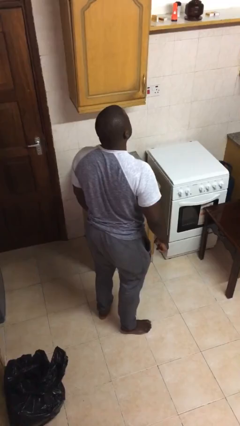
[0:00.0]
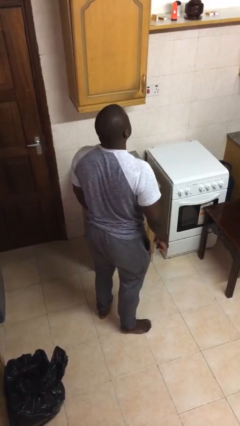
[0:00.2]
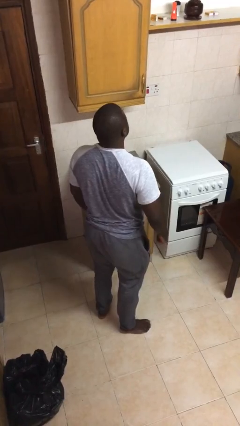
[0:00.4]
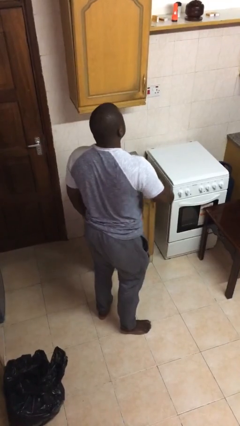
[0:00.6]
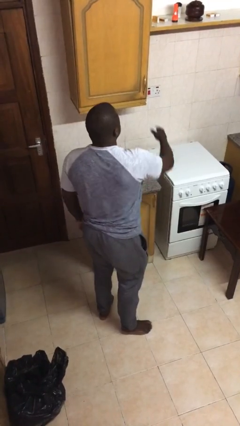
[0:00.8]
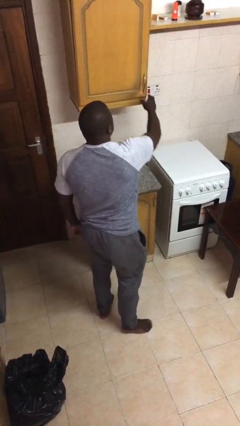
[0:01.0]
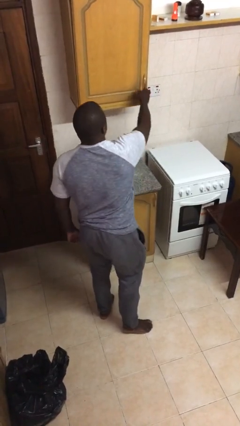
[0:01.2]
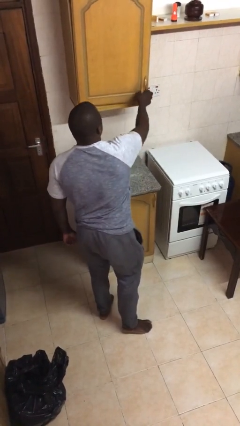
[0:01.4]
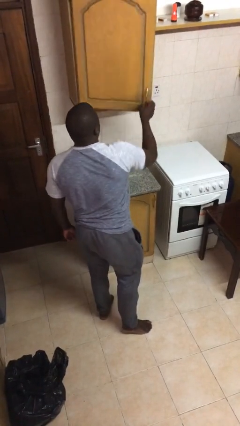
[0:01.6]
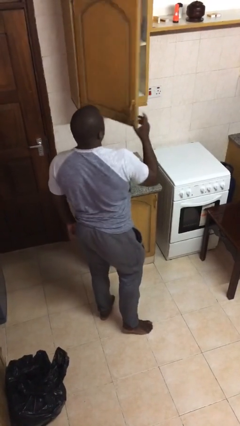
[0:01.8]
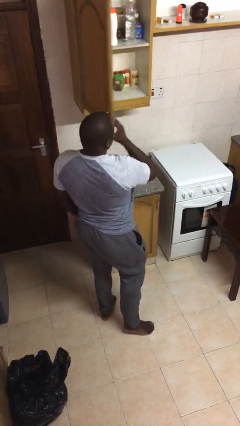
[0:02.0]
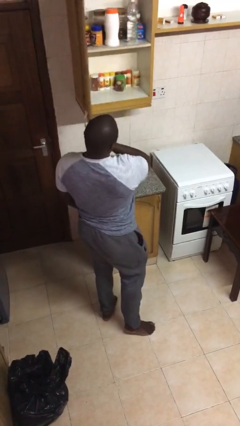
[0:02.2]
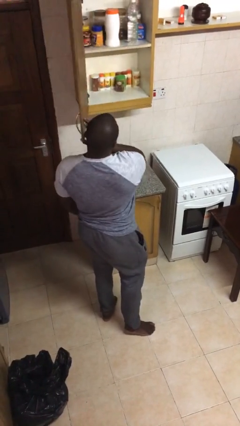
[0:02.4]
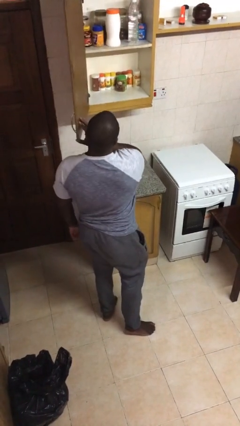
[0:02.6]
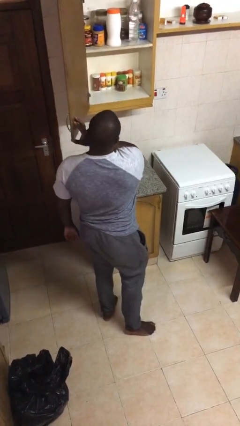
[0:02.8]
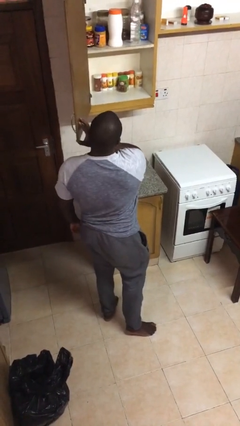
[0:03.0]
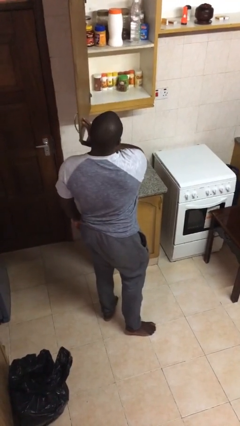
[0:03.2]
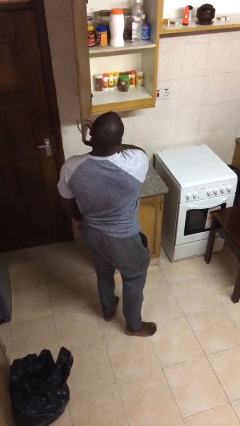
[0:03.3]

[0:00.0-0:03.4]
person opens cabinet

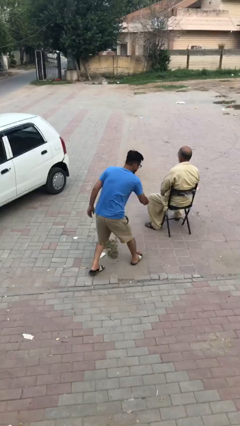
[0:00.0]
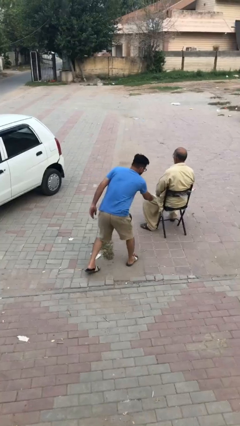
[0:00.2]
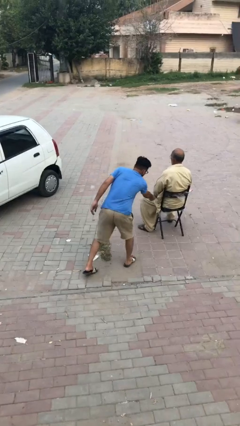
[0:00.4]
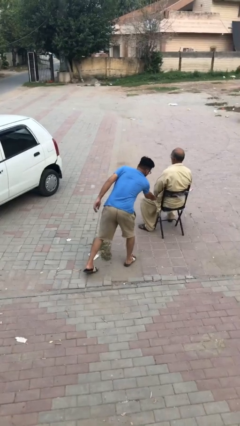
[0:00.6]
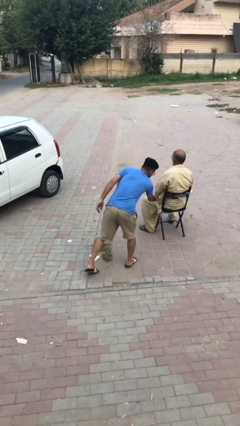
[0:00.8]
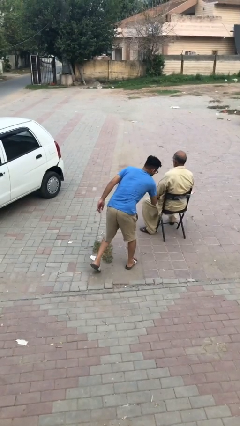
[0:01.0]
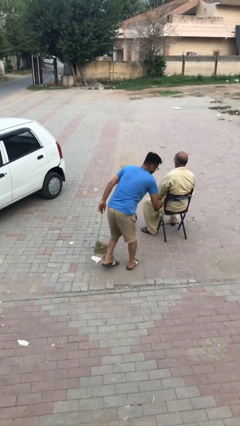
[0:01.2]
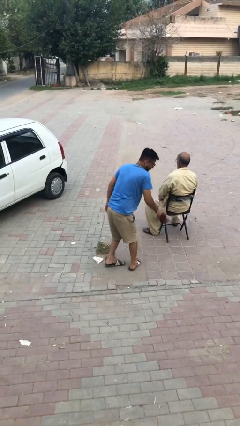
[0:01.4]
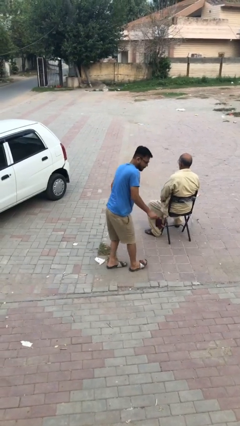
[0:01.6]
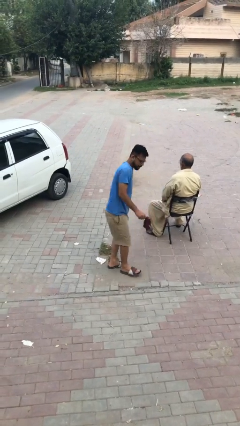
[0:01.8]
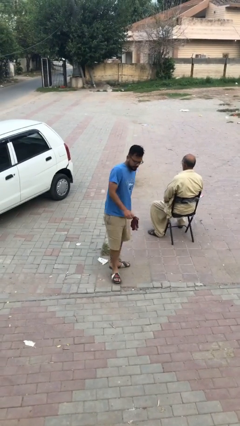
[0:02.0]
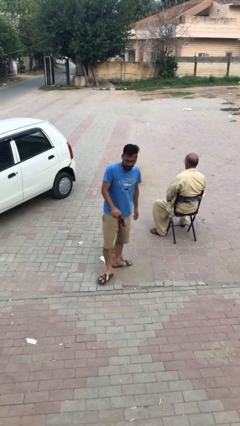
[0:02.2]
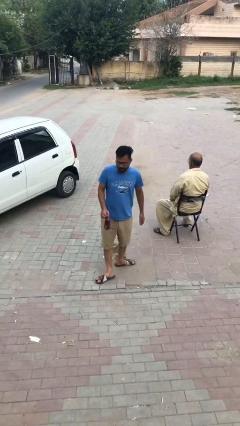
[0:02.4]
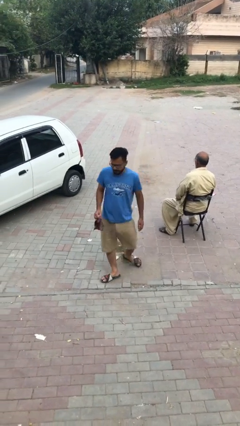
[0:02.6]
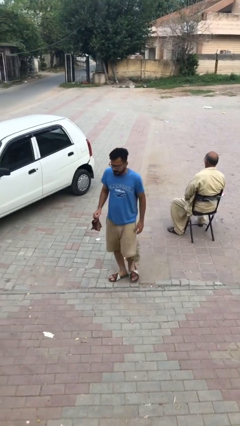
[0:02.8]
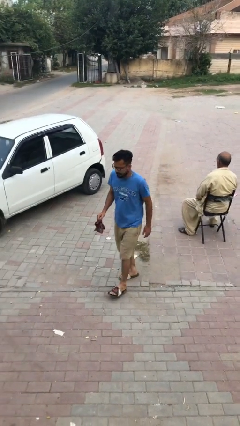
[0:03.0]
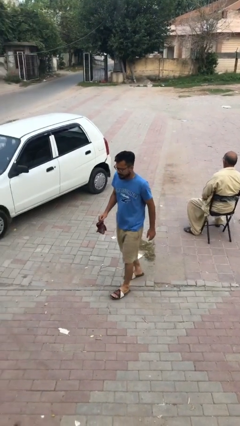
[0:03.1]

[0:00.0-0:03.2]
person steals object from person

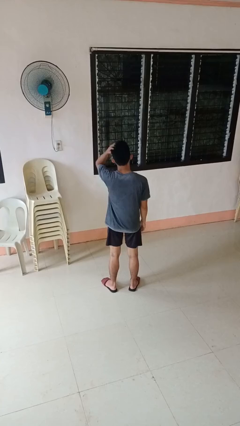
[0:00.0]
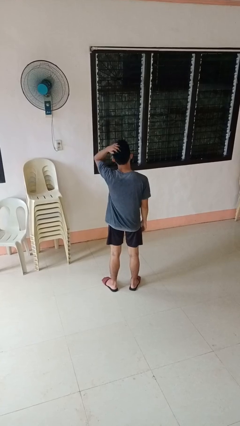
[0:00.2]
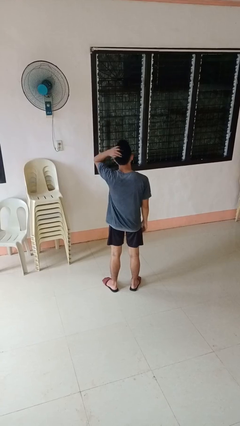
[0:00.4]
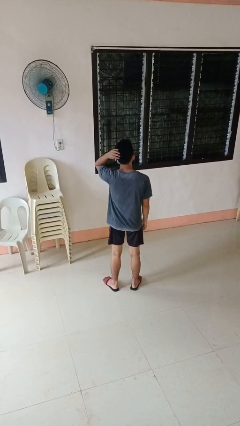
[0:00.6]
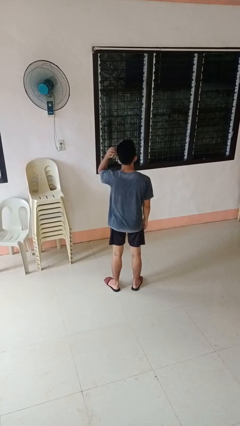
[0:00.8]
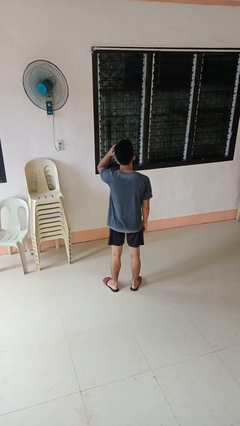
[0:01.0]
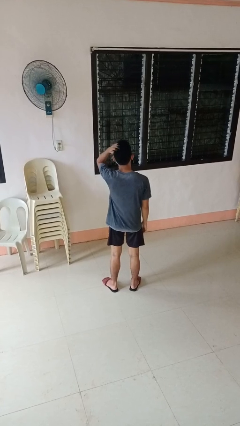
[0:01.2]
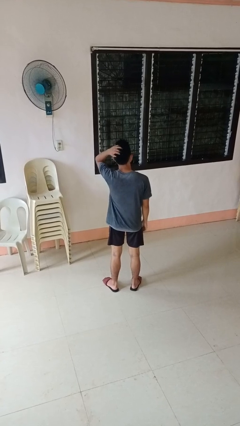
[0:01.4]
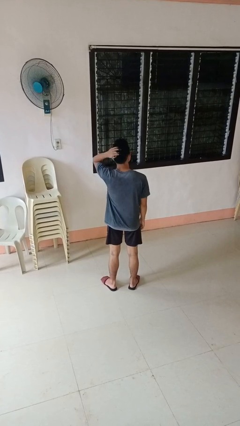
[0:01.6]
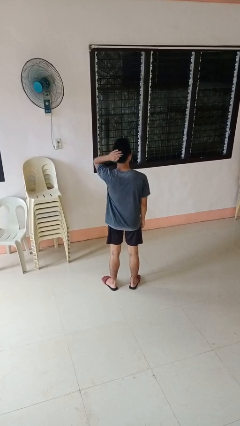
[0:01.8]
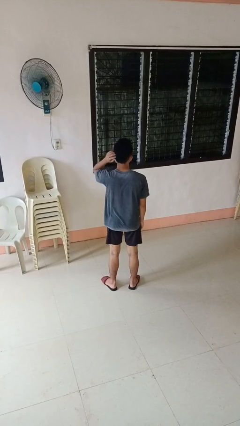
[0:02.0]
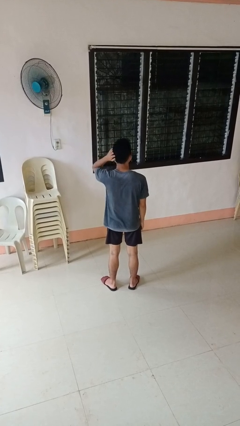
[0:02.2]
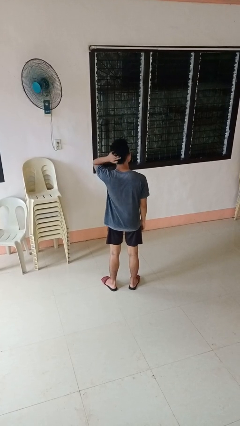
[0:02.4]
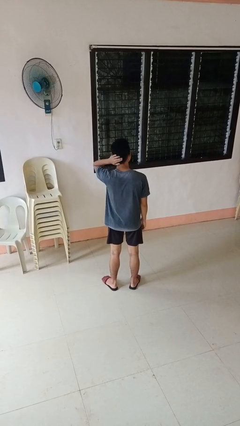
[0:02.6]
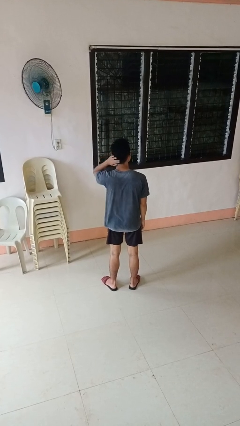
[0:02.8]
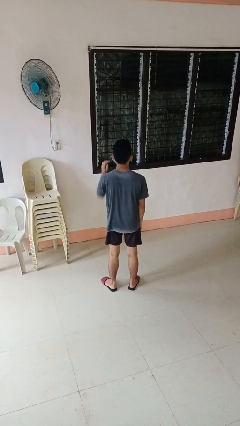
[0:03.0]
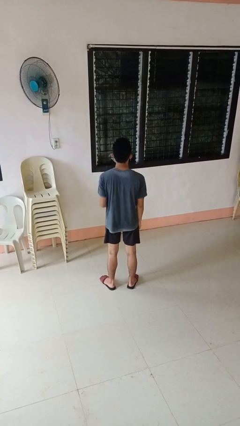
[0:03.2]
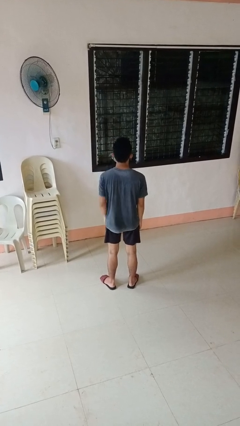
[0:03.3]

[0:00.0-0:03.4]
person strokes hair

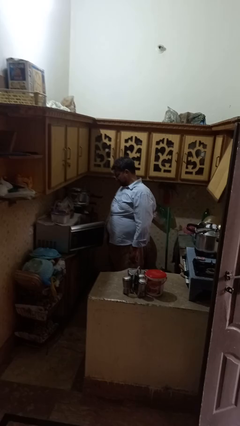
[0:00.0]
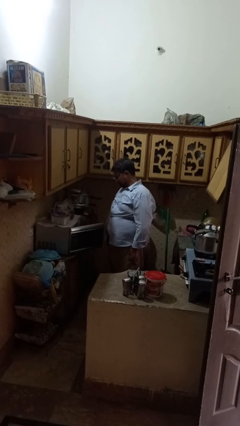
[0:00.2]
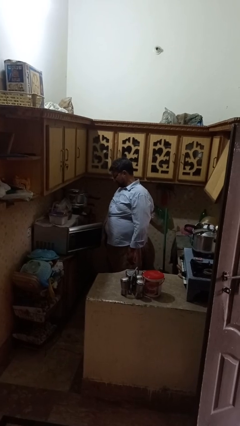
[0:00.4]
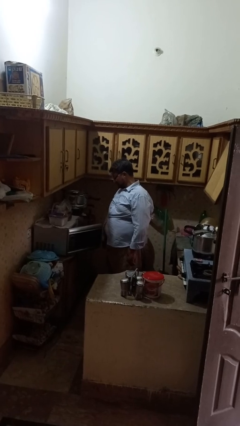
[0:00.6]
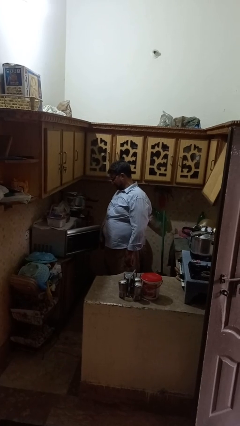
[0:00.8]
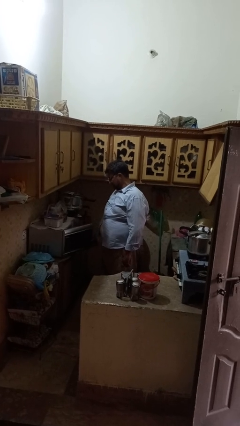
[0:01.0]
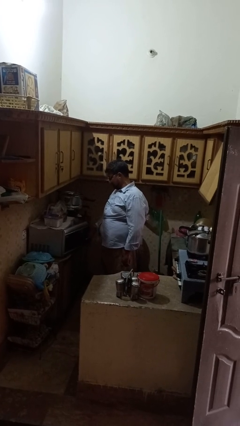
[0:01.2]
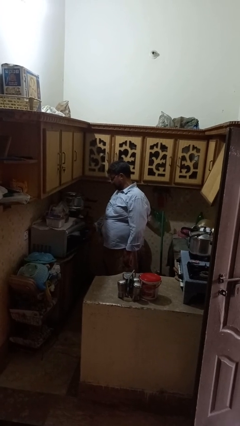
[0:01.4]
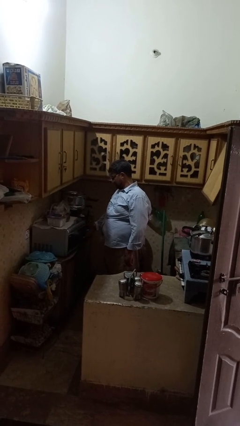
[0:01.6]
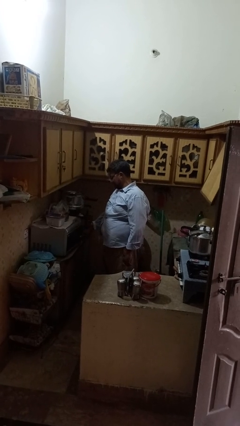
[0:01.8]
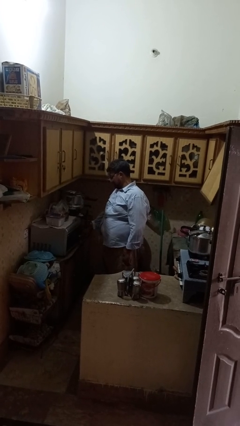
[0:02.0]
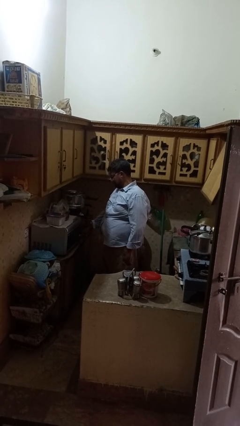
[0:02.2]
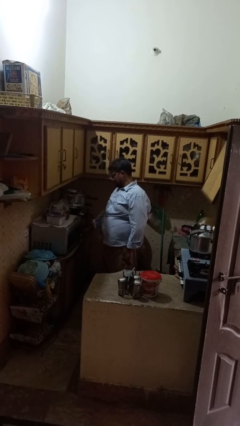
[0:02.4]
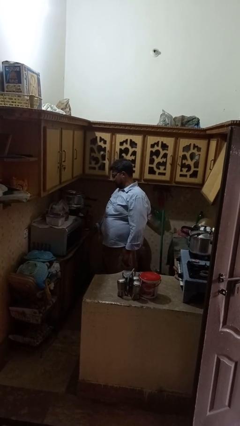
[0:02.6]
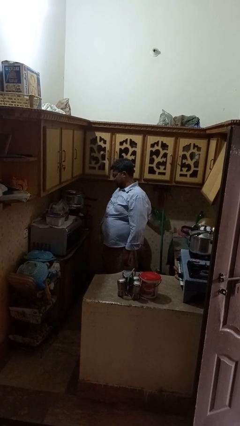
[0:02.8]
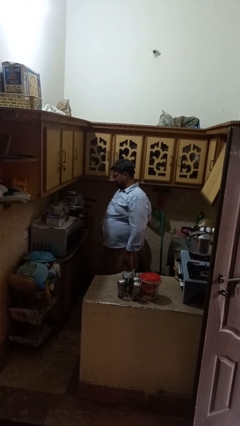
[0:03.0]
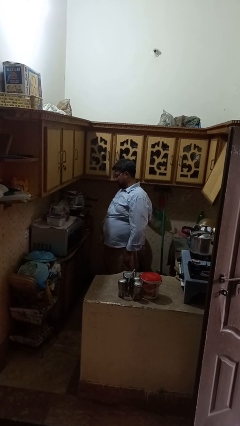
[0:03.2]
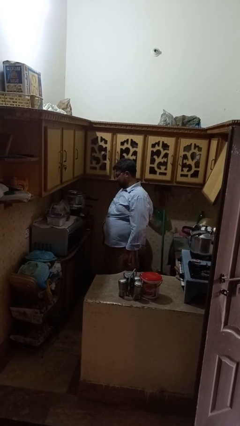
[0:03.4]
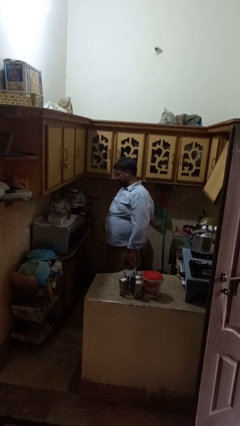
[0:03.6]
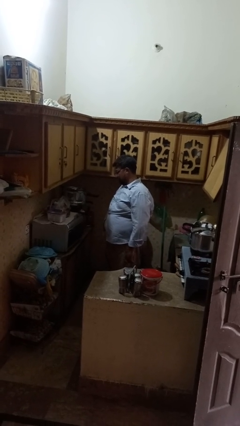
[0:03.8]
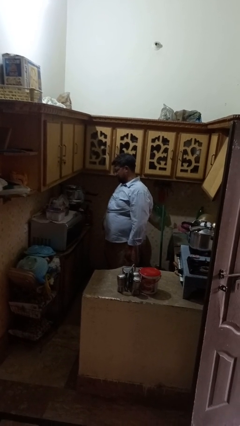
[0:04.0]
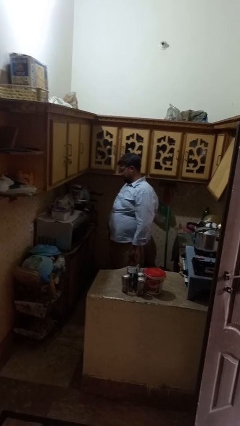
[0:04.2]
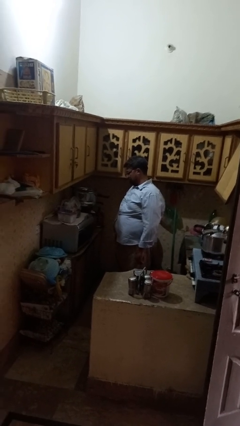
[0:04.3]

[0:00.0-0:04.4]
person closes microwave

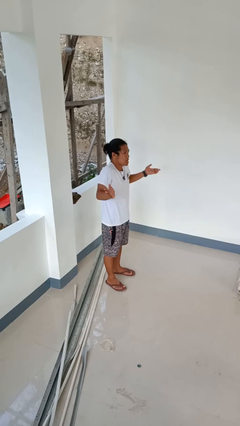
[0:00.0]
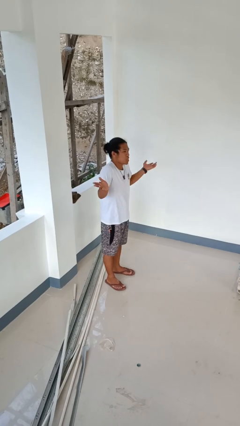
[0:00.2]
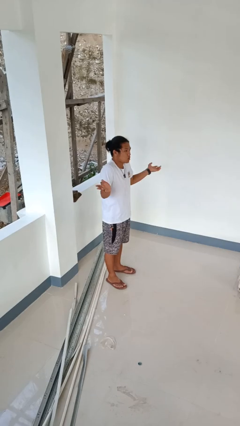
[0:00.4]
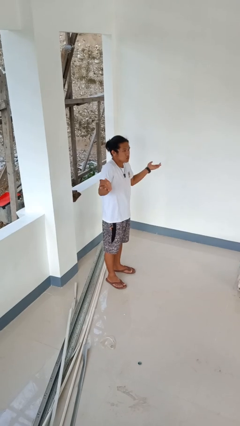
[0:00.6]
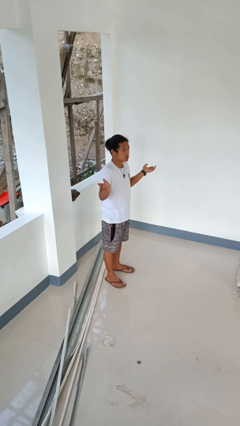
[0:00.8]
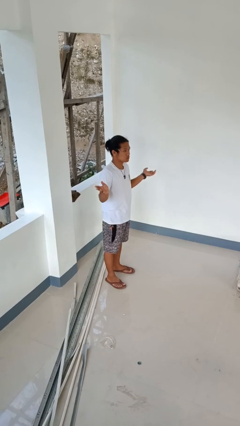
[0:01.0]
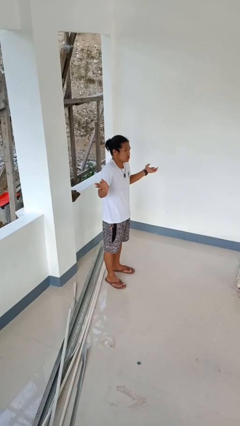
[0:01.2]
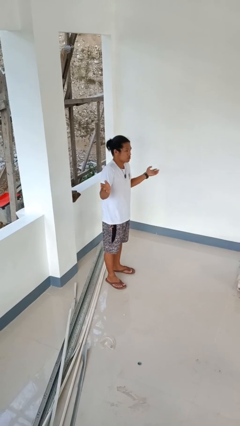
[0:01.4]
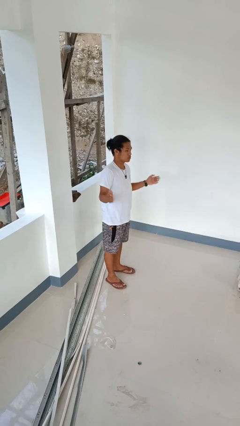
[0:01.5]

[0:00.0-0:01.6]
person shrugs

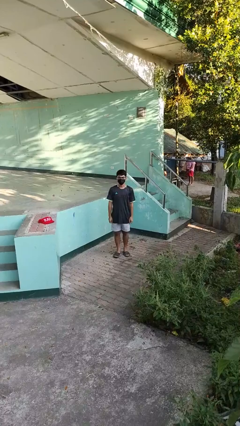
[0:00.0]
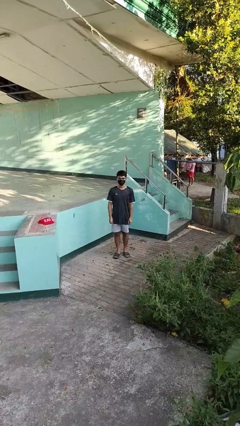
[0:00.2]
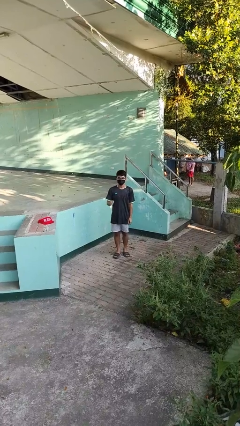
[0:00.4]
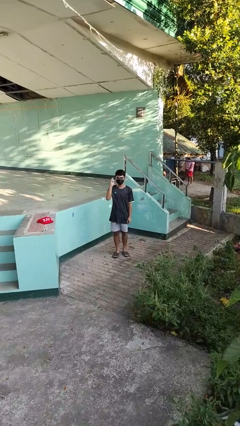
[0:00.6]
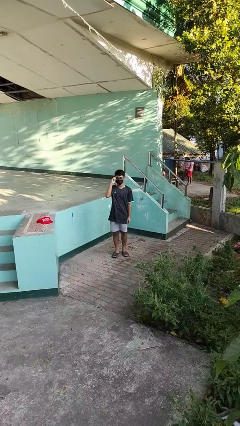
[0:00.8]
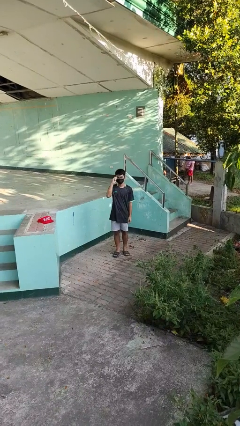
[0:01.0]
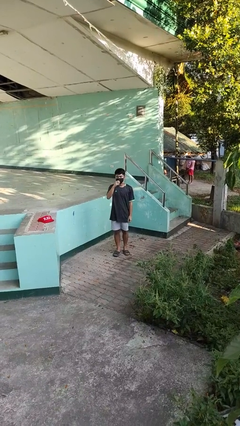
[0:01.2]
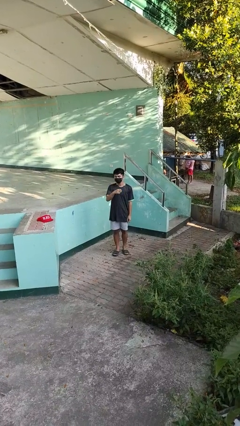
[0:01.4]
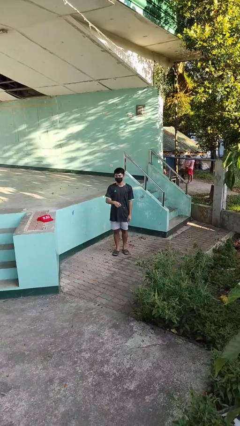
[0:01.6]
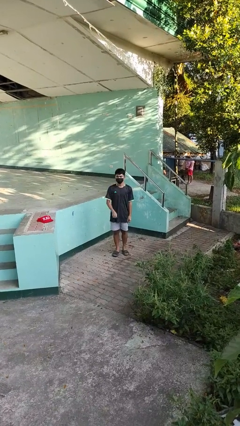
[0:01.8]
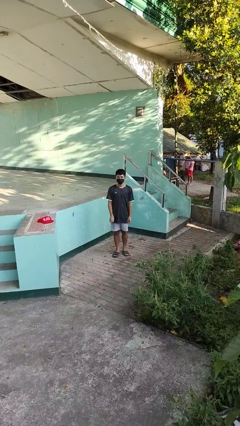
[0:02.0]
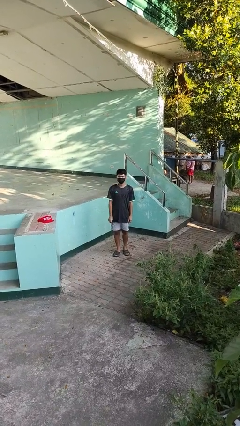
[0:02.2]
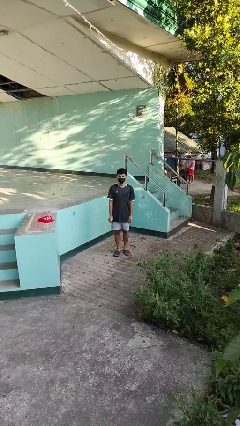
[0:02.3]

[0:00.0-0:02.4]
person takes off glasses
